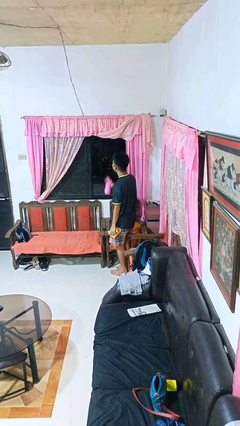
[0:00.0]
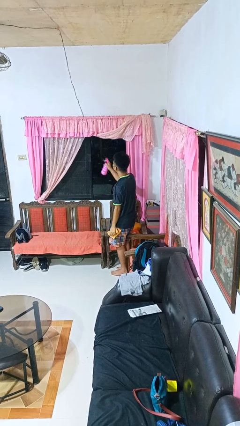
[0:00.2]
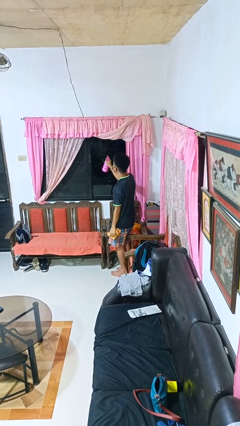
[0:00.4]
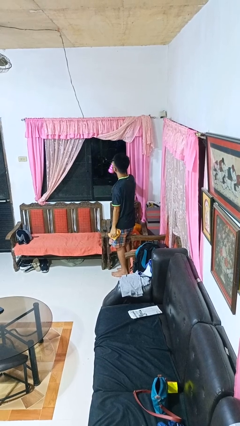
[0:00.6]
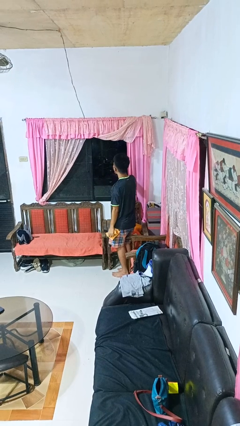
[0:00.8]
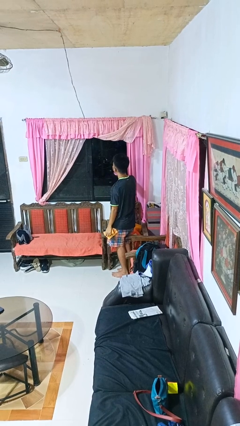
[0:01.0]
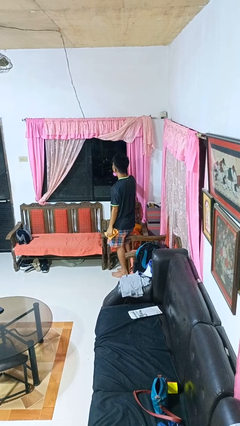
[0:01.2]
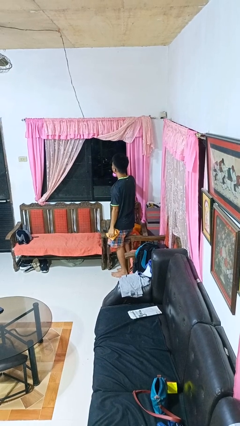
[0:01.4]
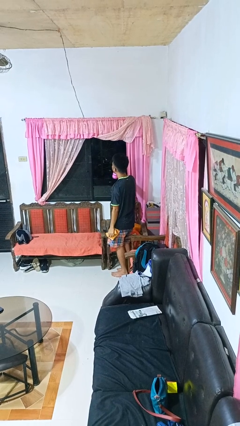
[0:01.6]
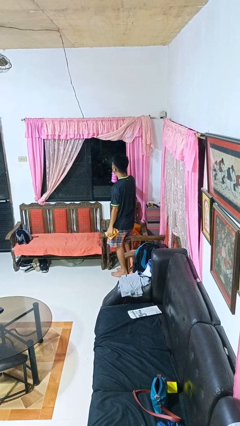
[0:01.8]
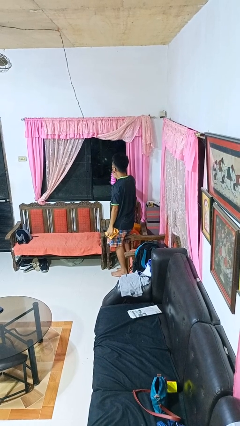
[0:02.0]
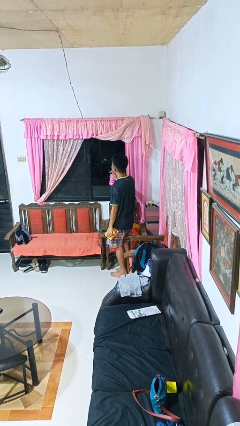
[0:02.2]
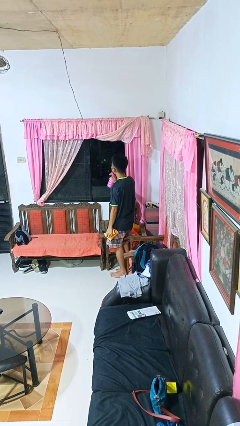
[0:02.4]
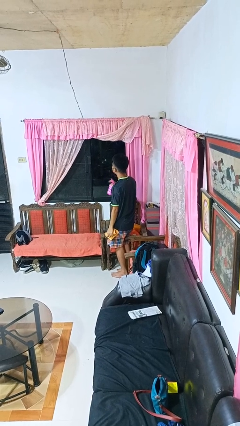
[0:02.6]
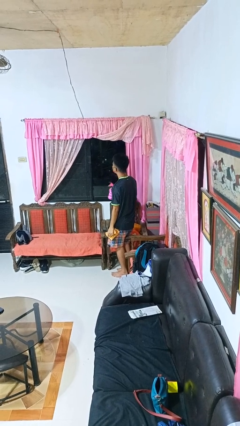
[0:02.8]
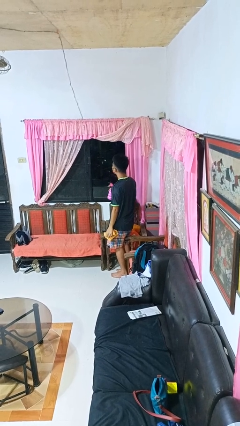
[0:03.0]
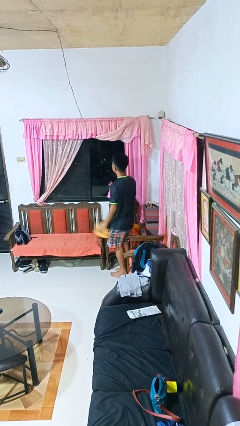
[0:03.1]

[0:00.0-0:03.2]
person sprays from bottle

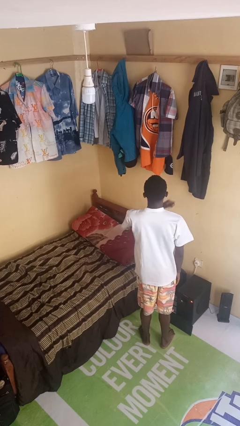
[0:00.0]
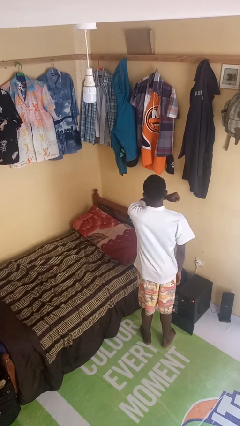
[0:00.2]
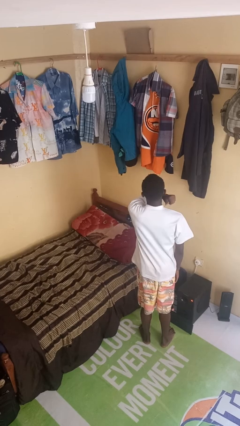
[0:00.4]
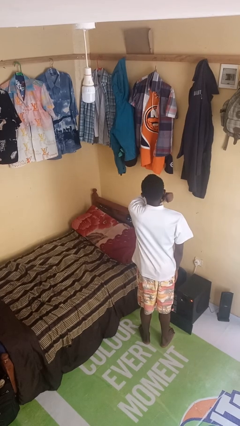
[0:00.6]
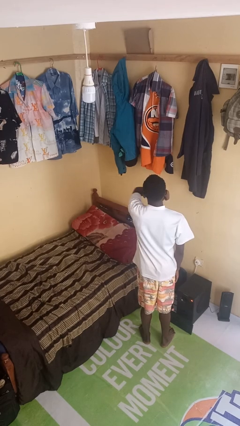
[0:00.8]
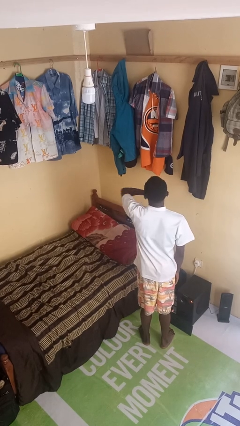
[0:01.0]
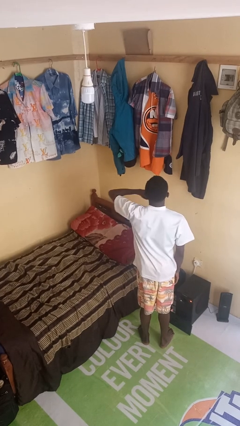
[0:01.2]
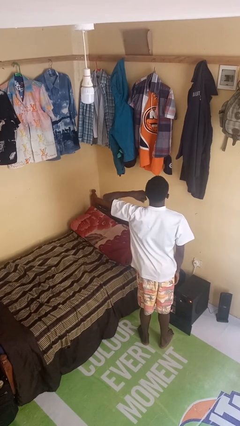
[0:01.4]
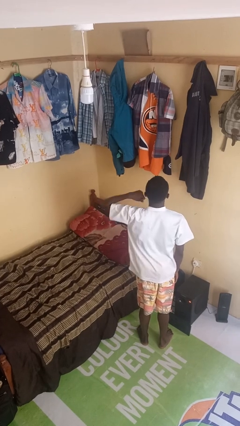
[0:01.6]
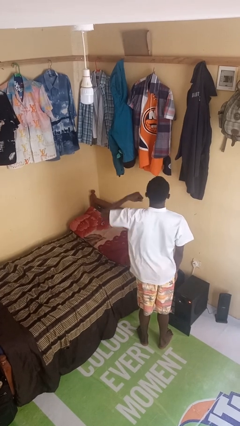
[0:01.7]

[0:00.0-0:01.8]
person gestures cut

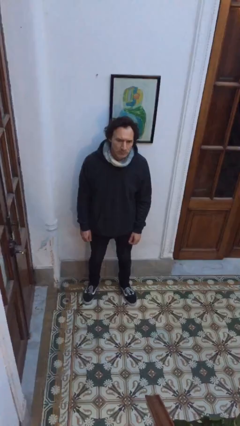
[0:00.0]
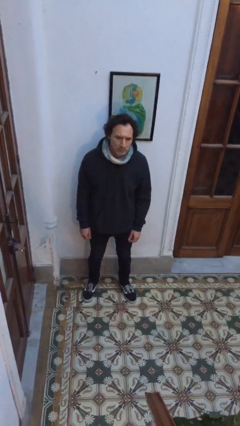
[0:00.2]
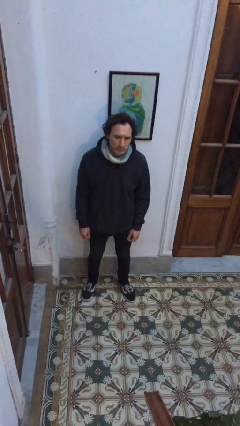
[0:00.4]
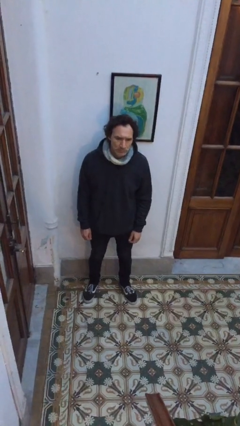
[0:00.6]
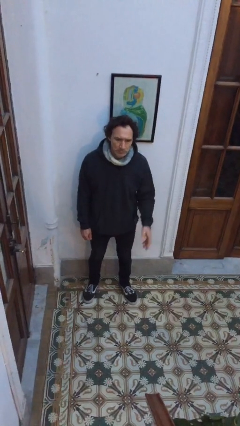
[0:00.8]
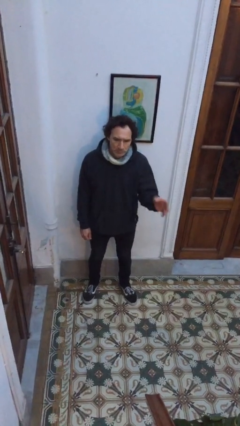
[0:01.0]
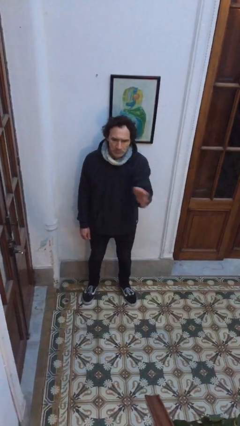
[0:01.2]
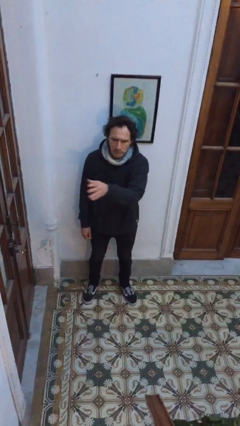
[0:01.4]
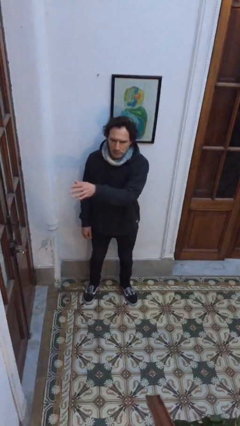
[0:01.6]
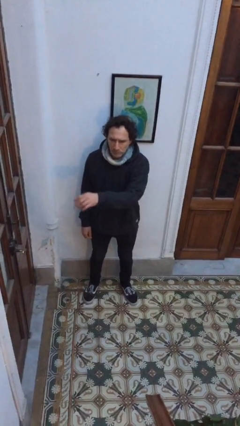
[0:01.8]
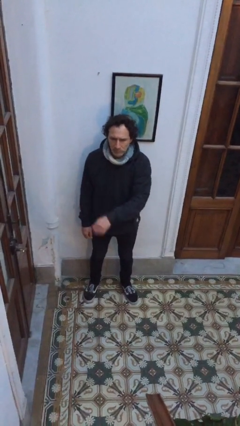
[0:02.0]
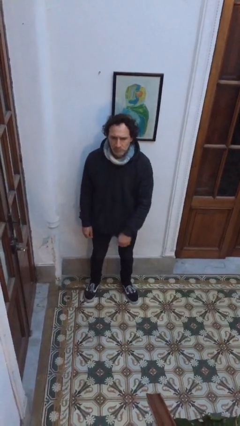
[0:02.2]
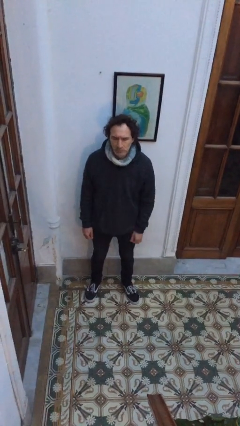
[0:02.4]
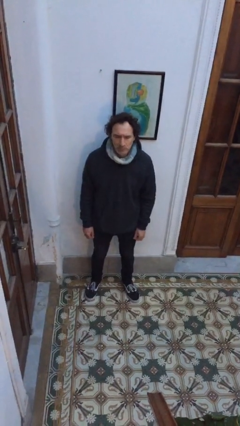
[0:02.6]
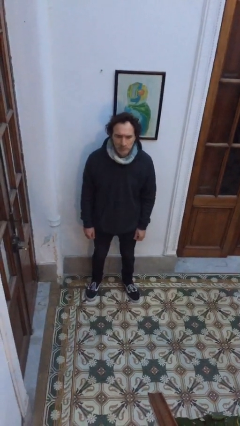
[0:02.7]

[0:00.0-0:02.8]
person gestures swipe right

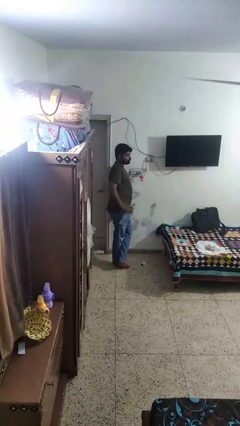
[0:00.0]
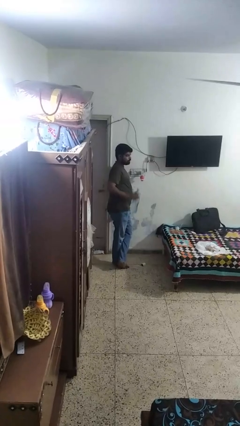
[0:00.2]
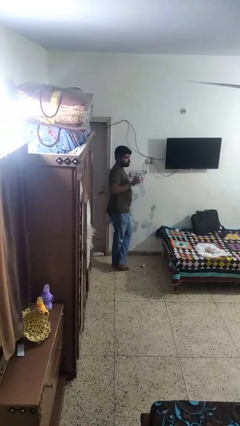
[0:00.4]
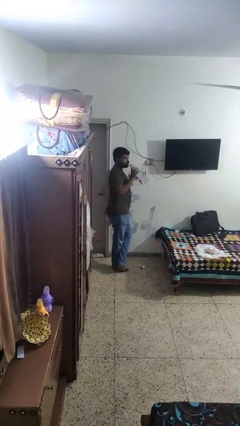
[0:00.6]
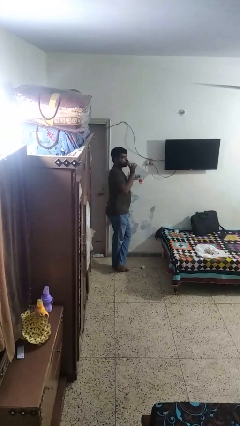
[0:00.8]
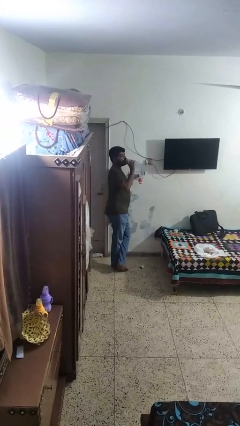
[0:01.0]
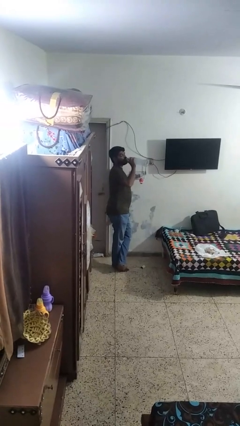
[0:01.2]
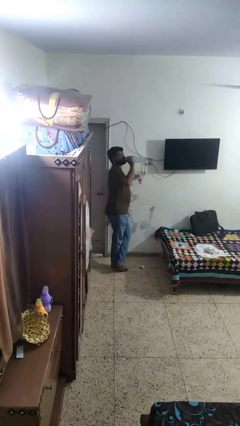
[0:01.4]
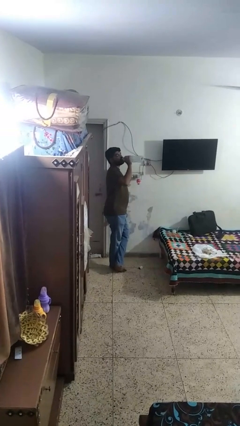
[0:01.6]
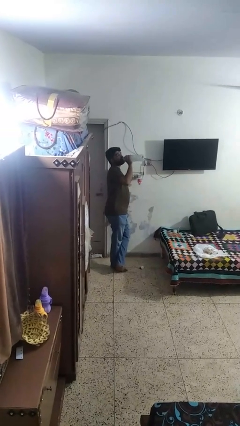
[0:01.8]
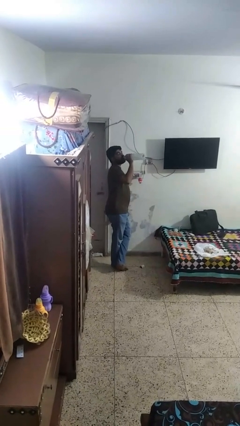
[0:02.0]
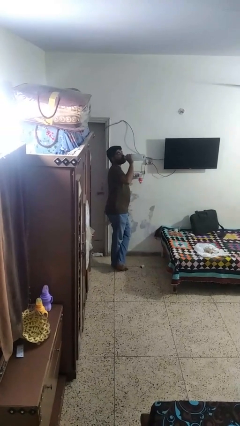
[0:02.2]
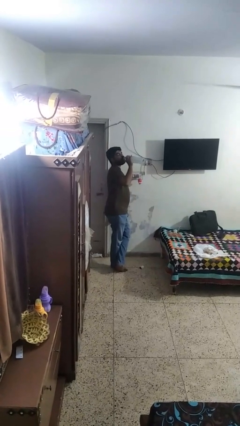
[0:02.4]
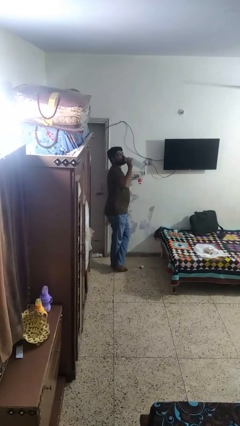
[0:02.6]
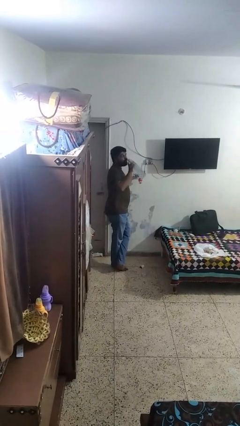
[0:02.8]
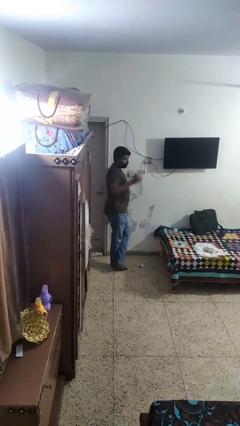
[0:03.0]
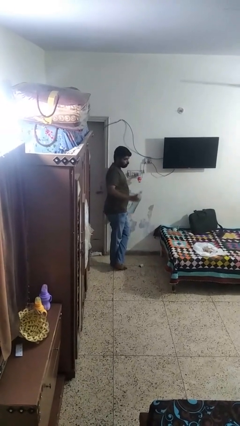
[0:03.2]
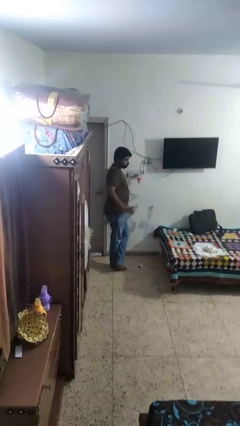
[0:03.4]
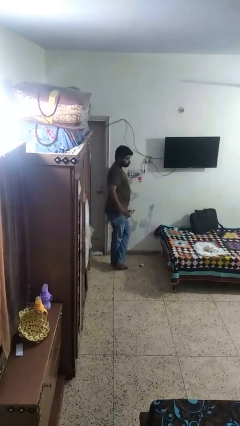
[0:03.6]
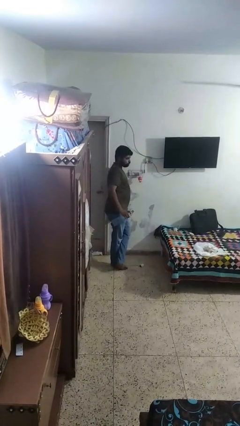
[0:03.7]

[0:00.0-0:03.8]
person drinks from bottle

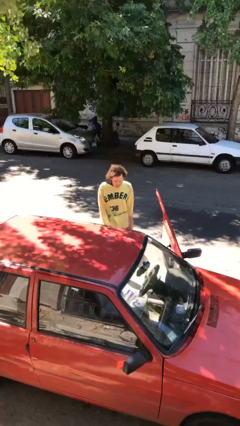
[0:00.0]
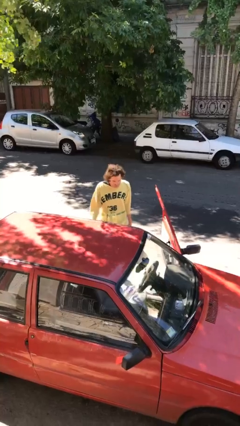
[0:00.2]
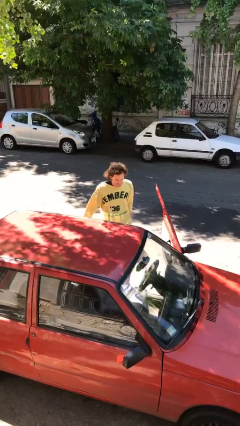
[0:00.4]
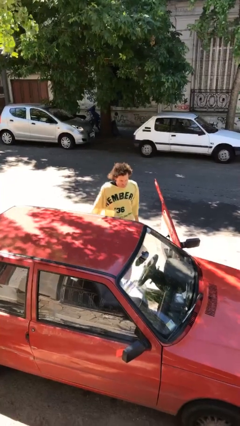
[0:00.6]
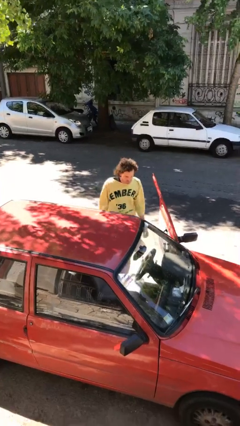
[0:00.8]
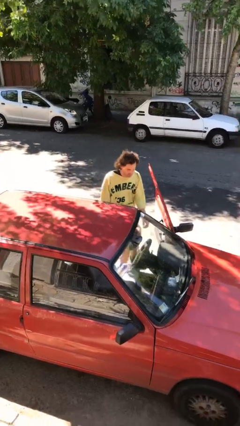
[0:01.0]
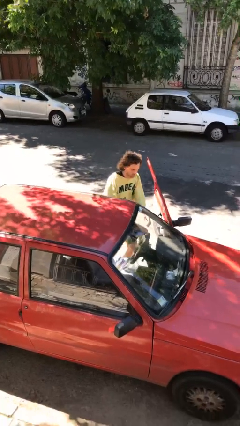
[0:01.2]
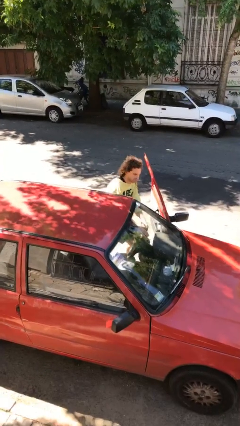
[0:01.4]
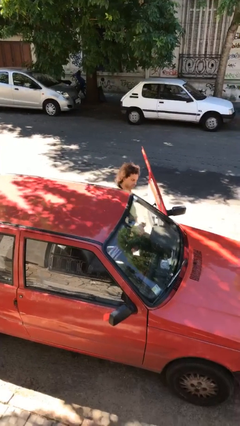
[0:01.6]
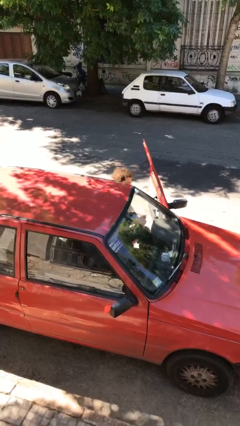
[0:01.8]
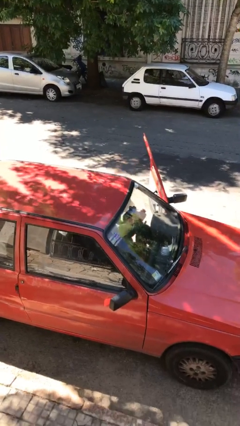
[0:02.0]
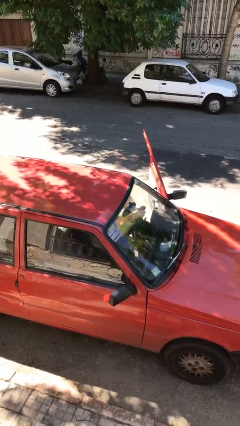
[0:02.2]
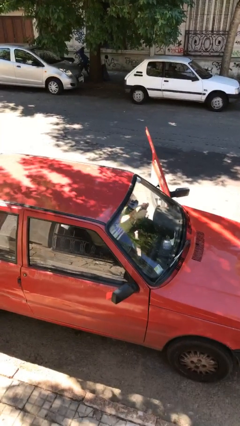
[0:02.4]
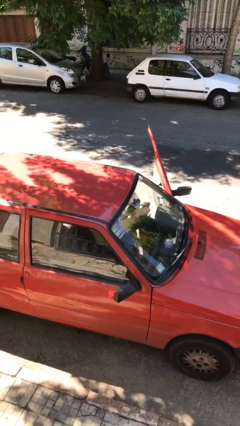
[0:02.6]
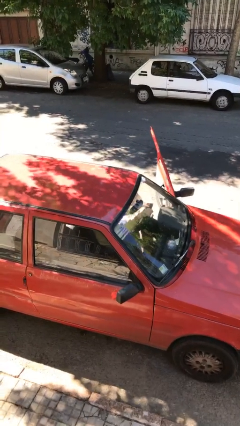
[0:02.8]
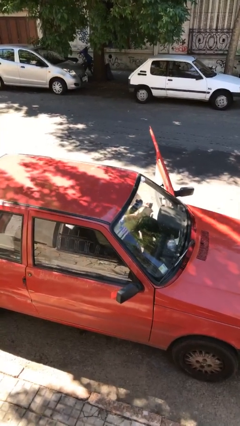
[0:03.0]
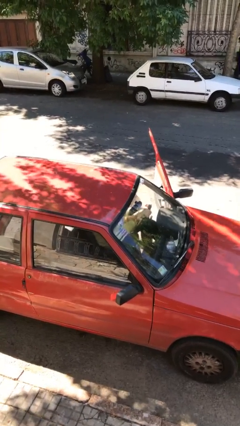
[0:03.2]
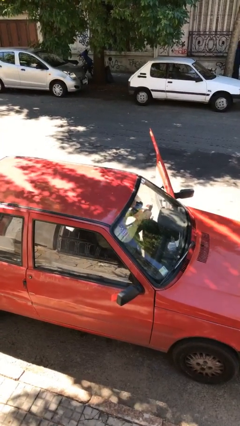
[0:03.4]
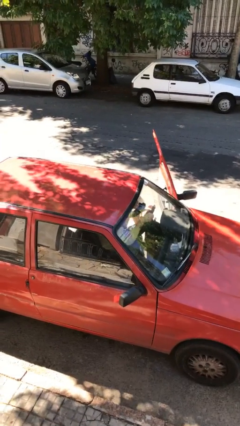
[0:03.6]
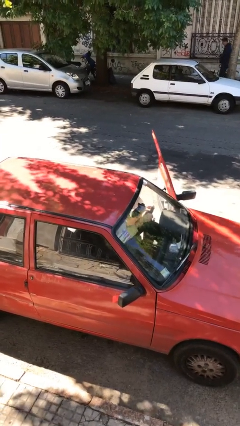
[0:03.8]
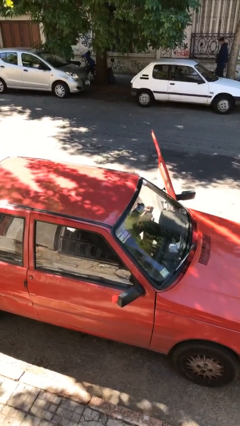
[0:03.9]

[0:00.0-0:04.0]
person enters car

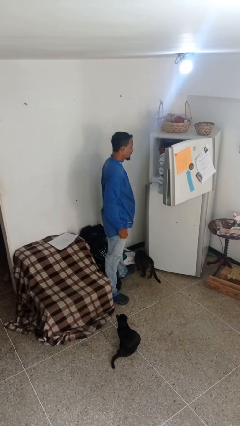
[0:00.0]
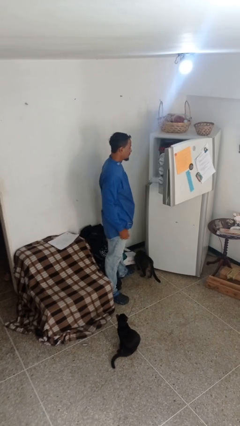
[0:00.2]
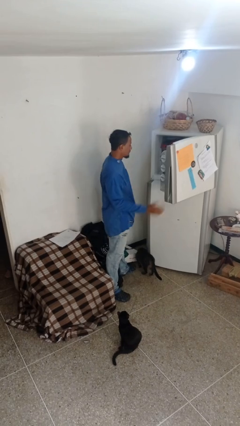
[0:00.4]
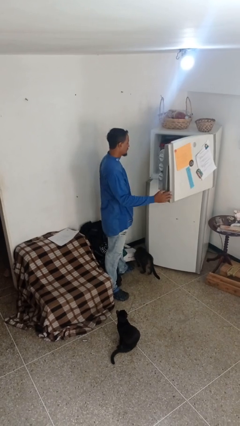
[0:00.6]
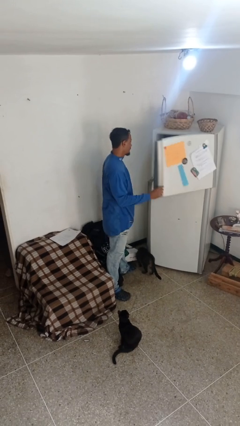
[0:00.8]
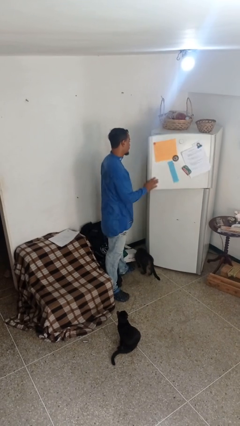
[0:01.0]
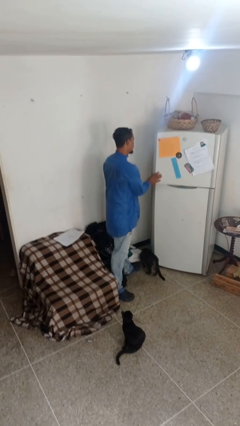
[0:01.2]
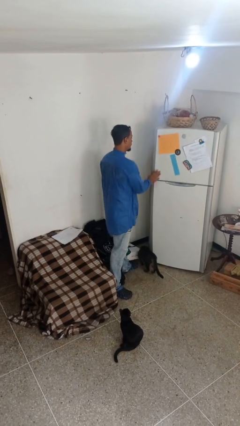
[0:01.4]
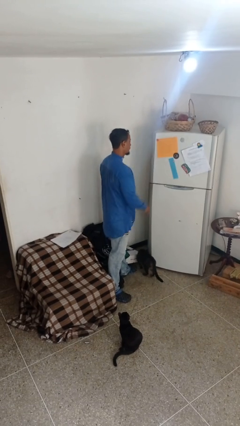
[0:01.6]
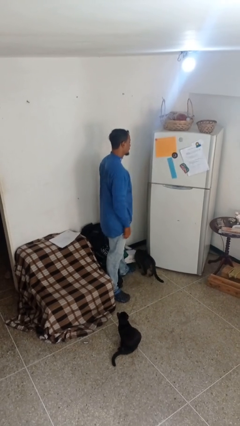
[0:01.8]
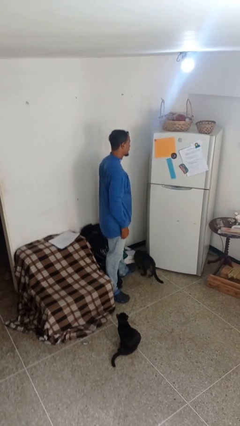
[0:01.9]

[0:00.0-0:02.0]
person closes refrigerator
